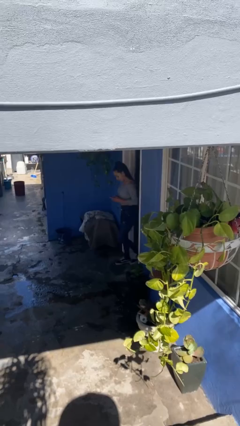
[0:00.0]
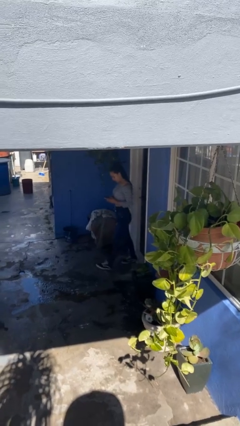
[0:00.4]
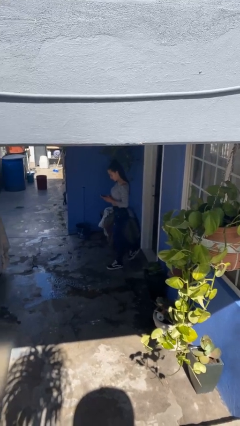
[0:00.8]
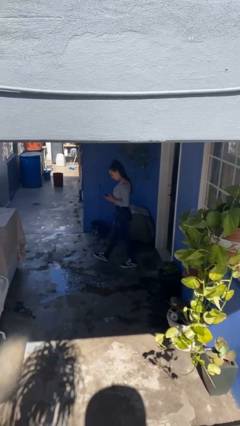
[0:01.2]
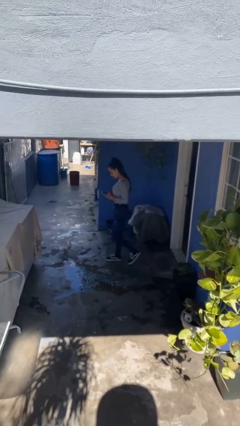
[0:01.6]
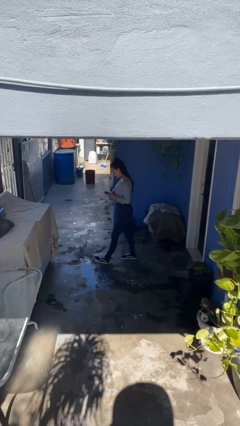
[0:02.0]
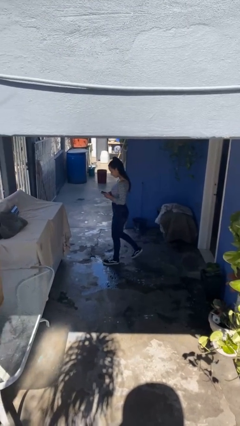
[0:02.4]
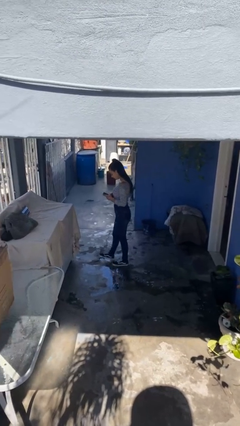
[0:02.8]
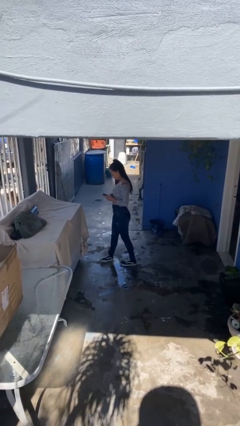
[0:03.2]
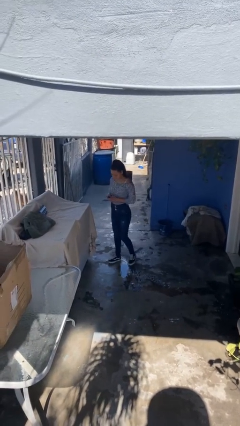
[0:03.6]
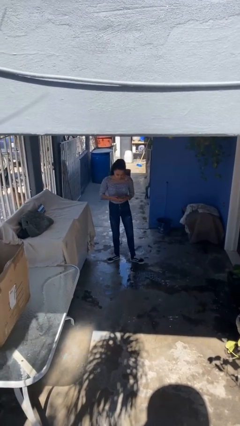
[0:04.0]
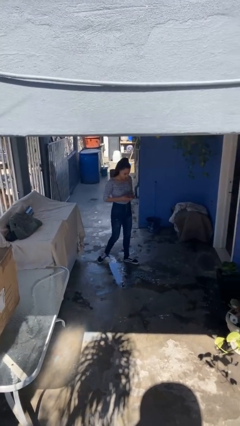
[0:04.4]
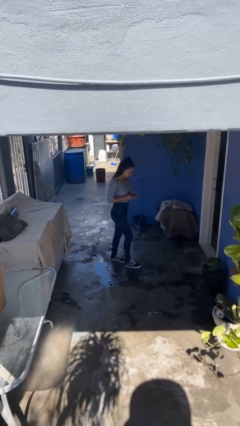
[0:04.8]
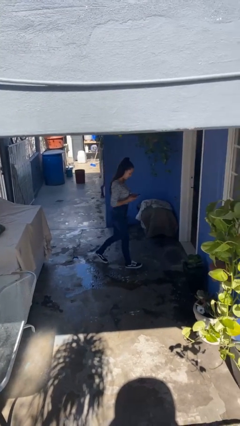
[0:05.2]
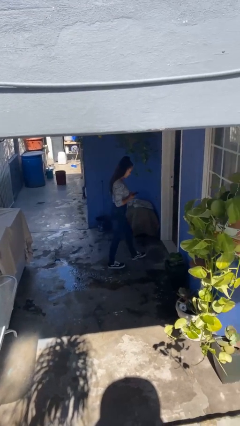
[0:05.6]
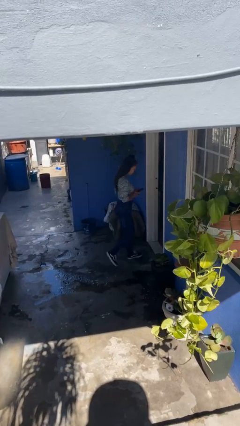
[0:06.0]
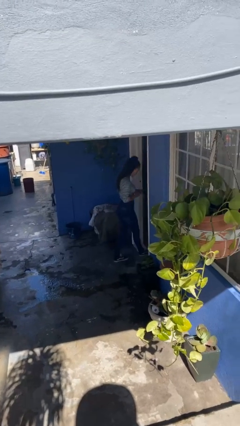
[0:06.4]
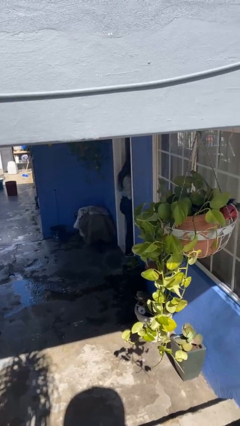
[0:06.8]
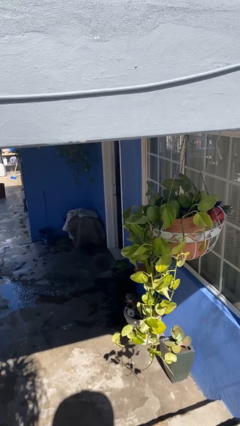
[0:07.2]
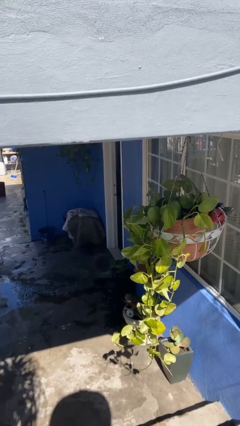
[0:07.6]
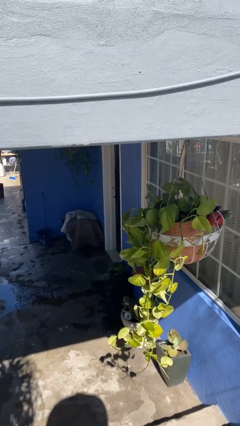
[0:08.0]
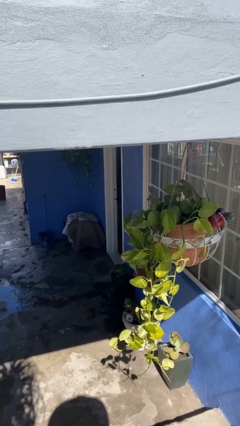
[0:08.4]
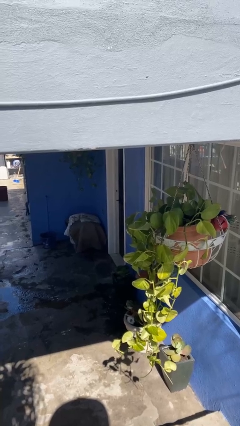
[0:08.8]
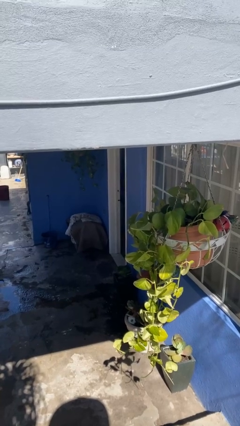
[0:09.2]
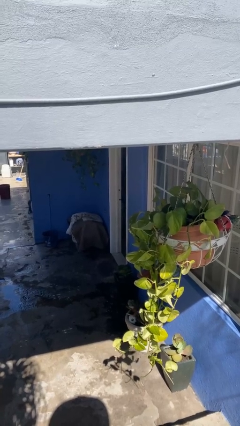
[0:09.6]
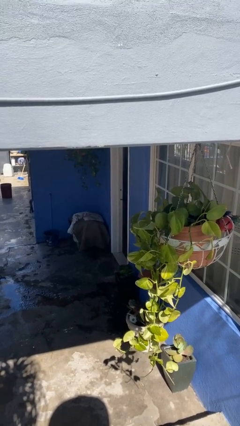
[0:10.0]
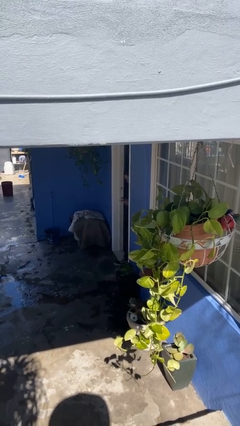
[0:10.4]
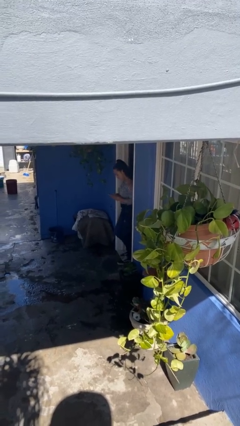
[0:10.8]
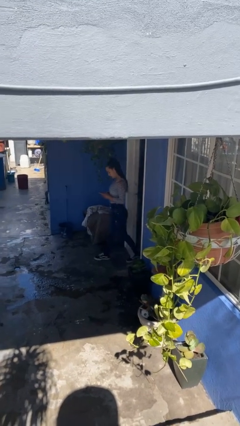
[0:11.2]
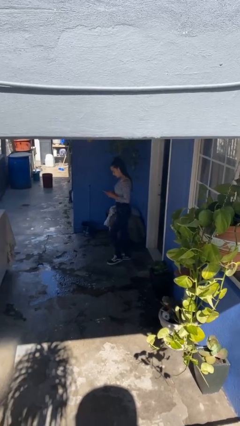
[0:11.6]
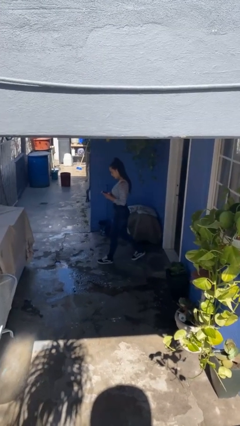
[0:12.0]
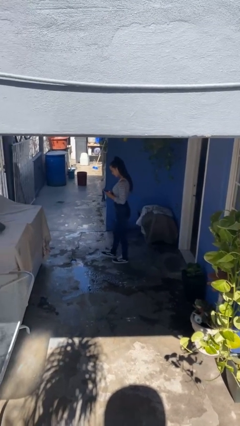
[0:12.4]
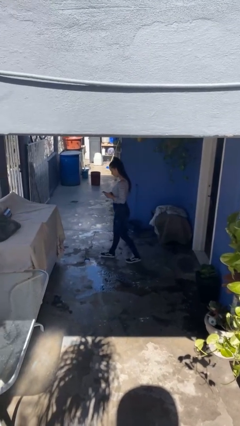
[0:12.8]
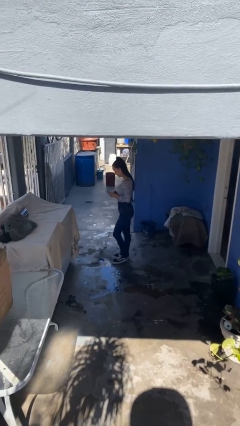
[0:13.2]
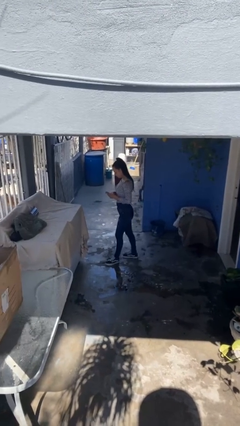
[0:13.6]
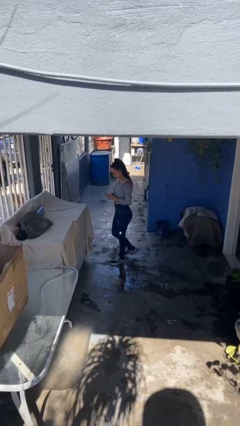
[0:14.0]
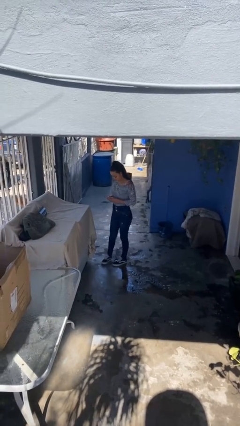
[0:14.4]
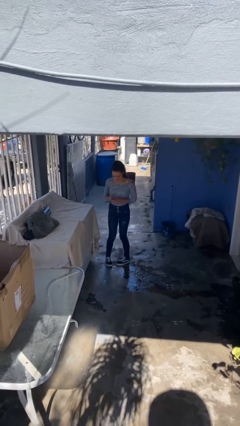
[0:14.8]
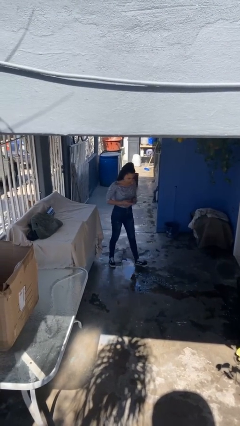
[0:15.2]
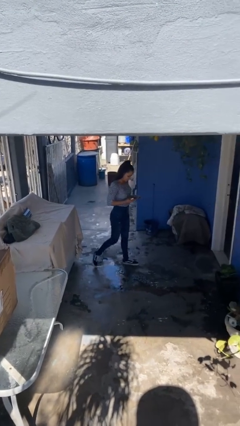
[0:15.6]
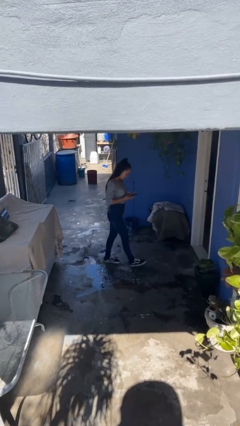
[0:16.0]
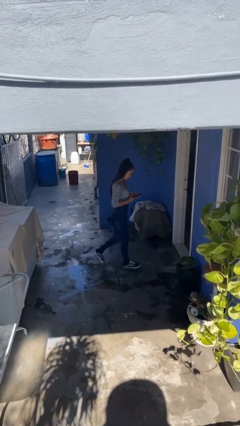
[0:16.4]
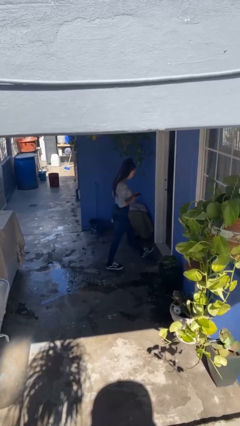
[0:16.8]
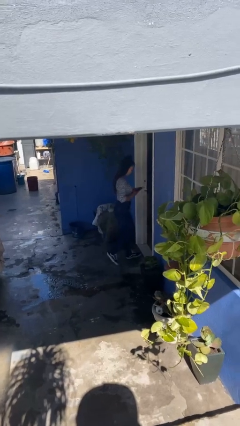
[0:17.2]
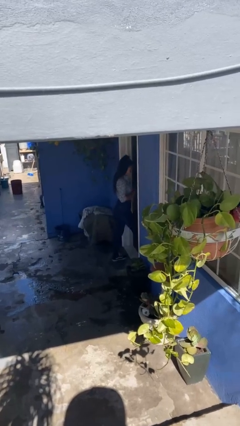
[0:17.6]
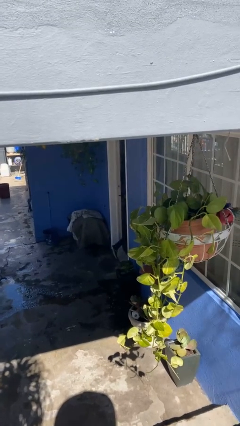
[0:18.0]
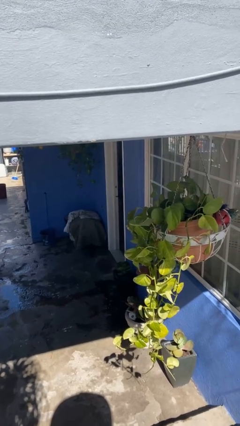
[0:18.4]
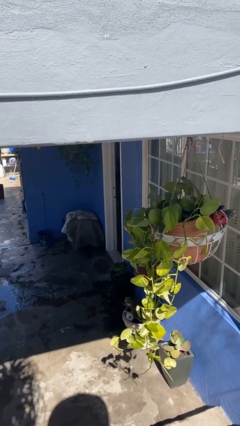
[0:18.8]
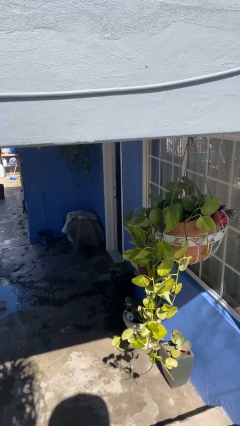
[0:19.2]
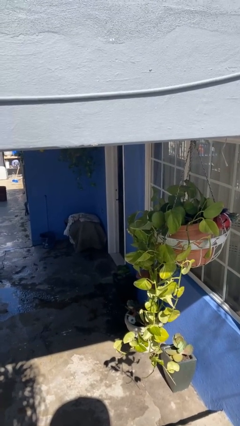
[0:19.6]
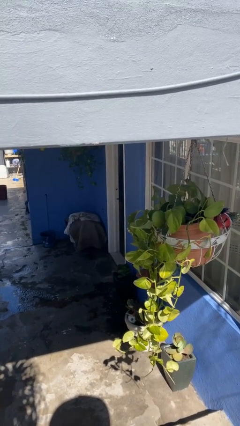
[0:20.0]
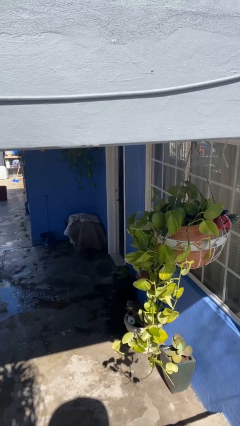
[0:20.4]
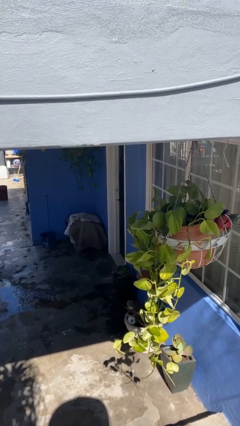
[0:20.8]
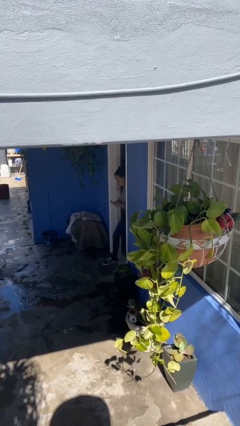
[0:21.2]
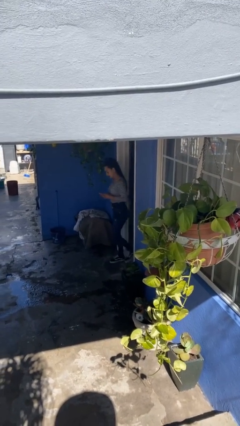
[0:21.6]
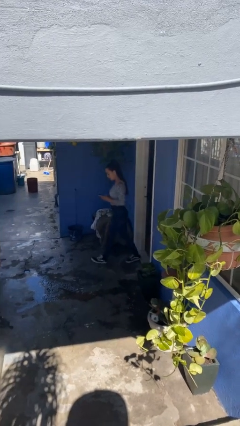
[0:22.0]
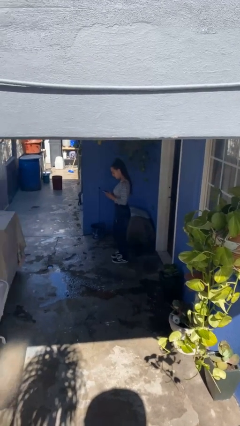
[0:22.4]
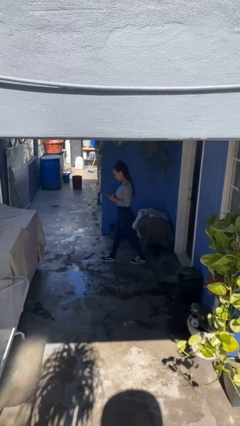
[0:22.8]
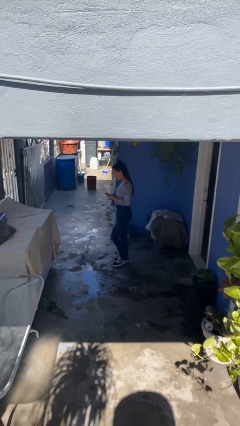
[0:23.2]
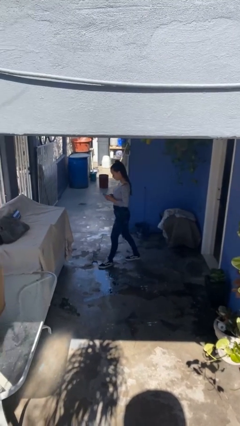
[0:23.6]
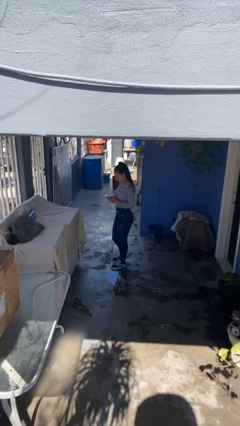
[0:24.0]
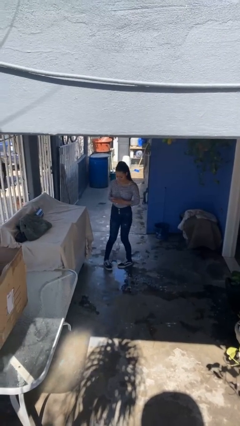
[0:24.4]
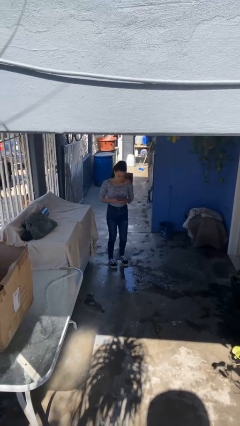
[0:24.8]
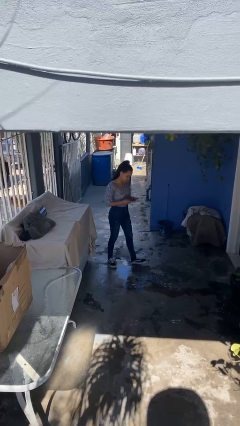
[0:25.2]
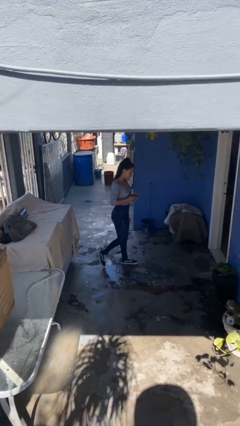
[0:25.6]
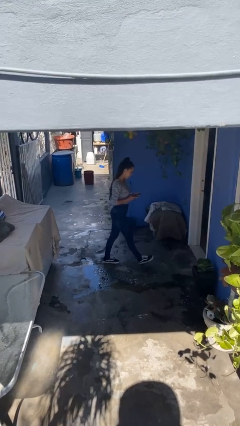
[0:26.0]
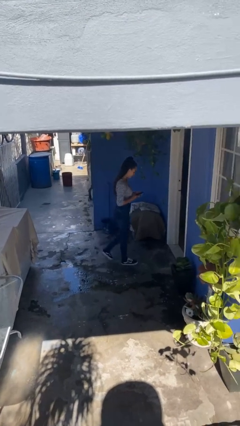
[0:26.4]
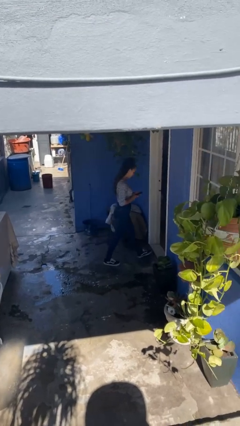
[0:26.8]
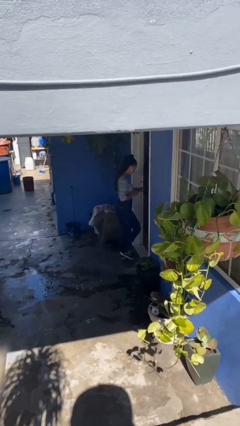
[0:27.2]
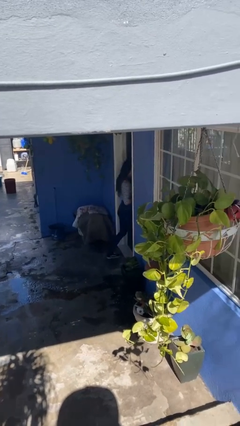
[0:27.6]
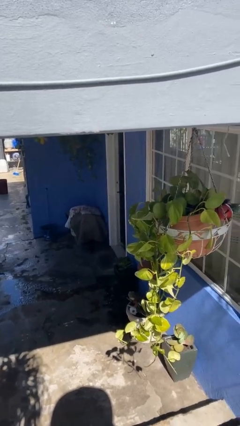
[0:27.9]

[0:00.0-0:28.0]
person texts on phone

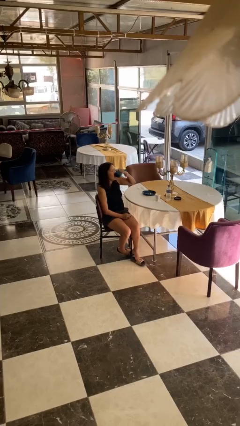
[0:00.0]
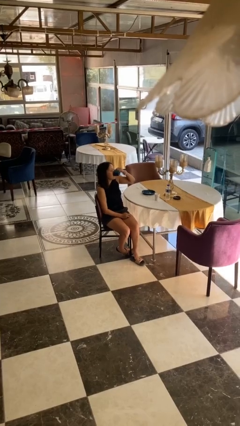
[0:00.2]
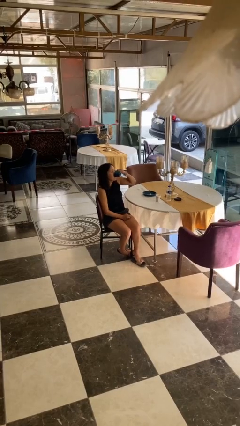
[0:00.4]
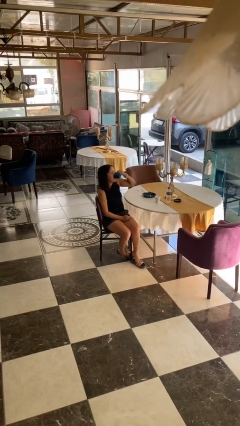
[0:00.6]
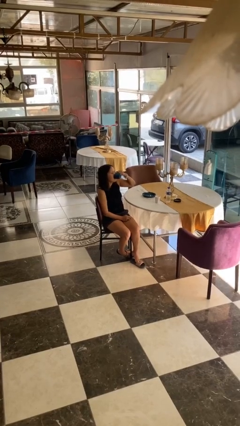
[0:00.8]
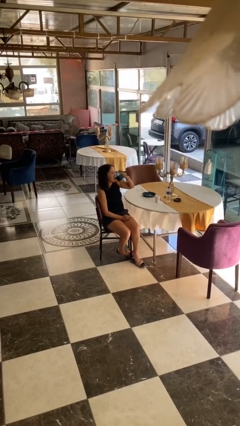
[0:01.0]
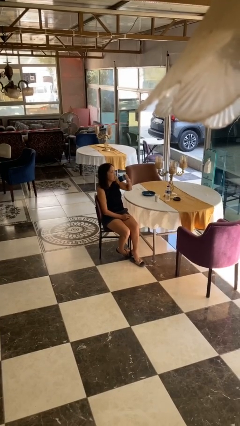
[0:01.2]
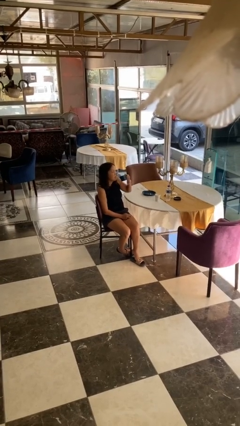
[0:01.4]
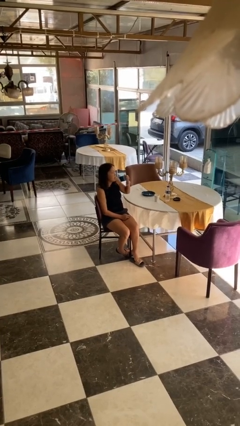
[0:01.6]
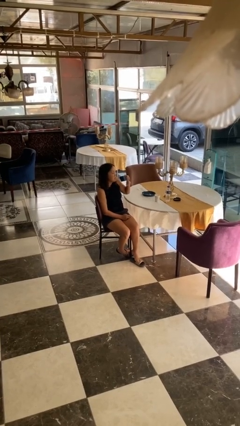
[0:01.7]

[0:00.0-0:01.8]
person drinks from mug

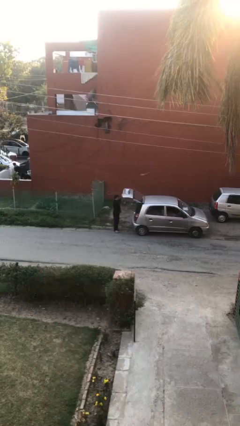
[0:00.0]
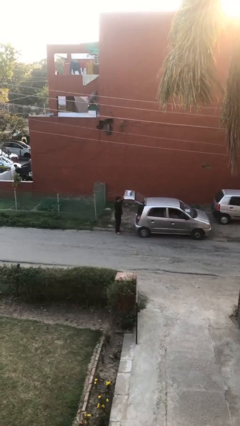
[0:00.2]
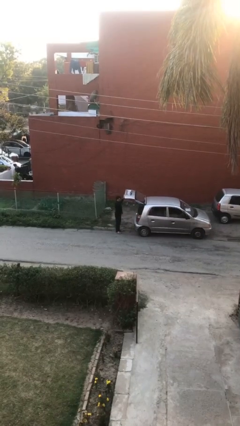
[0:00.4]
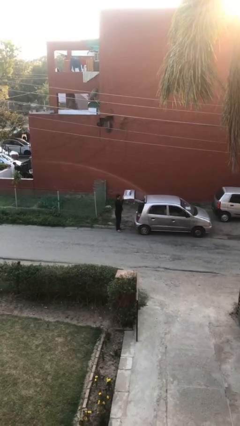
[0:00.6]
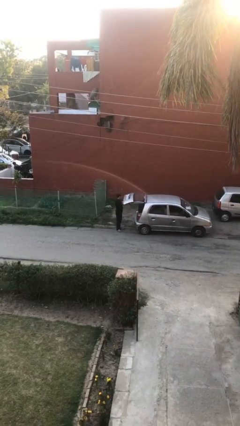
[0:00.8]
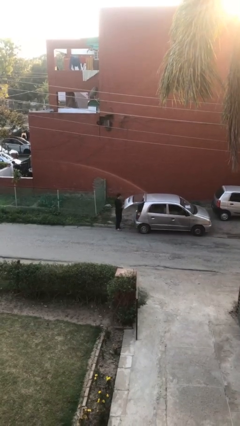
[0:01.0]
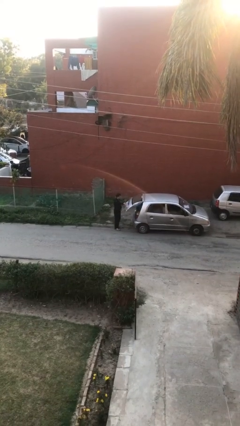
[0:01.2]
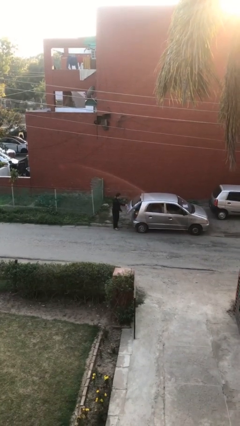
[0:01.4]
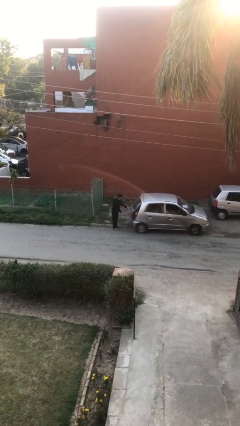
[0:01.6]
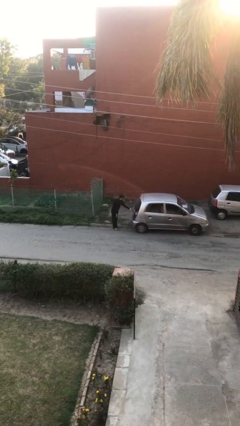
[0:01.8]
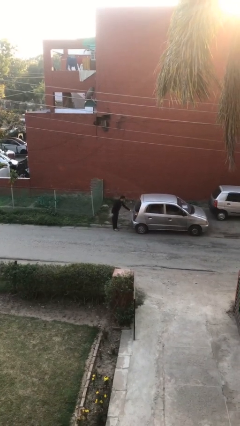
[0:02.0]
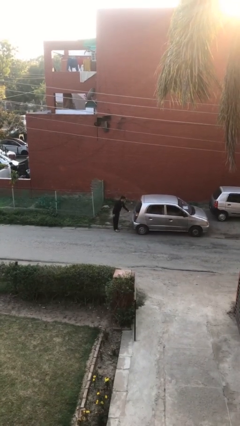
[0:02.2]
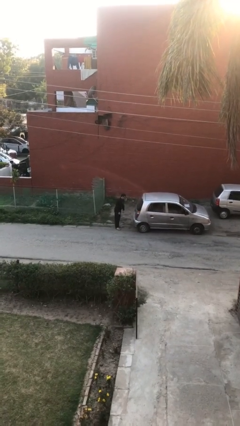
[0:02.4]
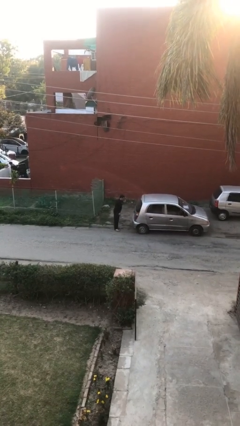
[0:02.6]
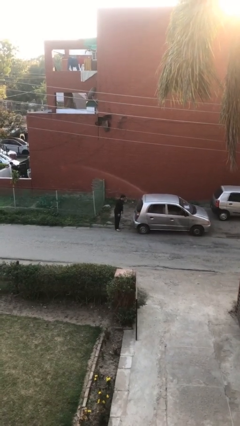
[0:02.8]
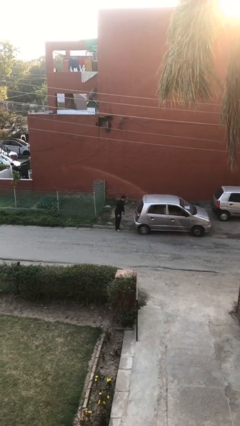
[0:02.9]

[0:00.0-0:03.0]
person closes car trunk
